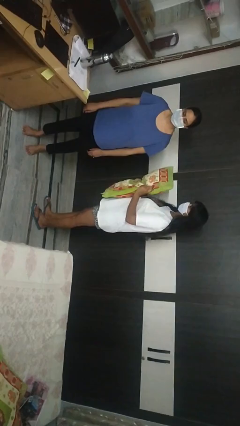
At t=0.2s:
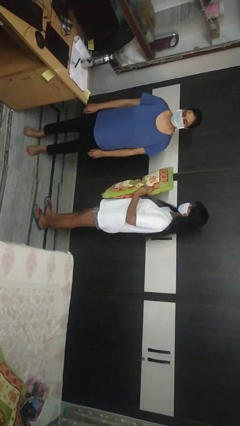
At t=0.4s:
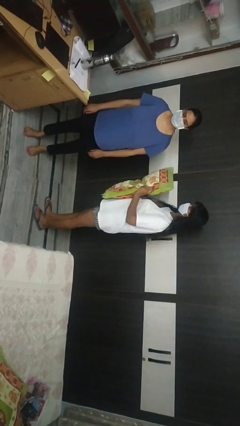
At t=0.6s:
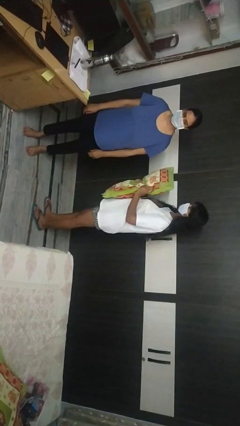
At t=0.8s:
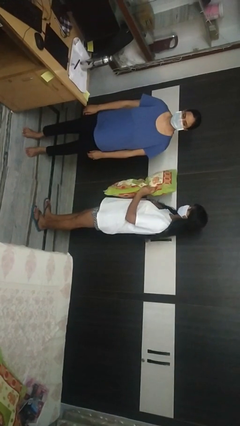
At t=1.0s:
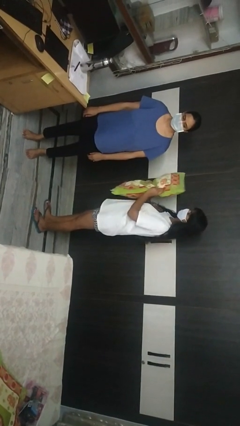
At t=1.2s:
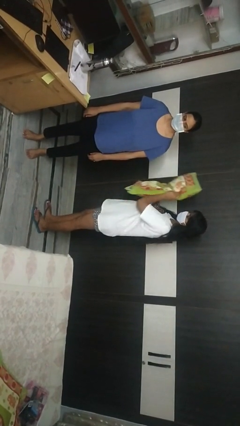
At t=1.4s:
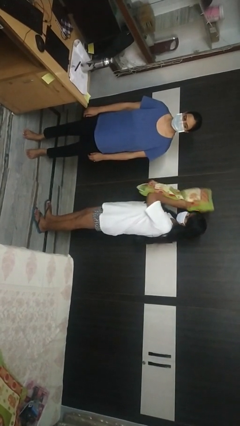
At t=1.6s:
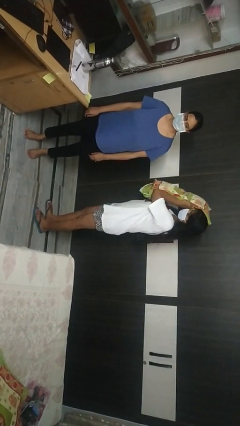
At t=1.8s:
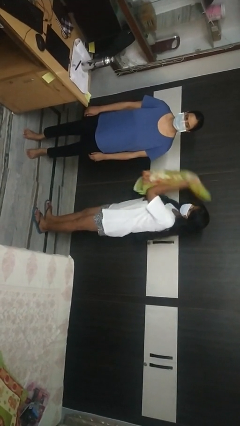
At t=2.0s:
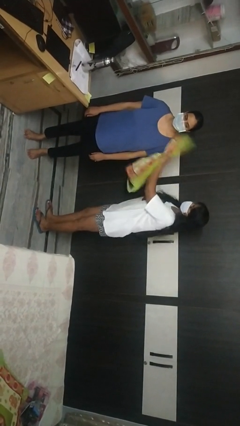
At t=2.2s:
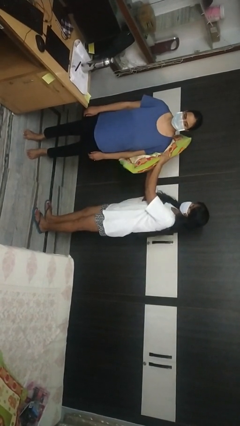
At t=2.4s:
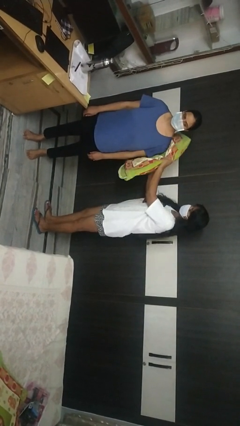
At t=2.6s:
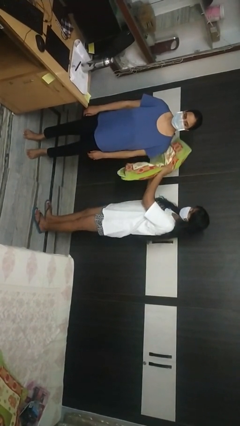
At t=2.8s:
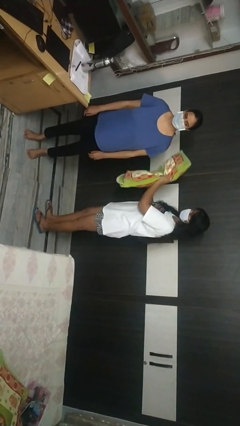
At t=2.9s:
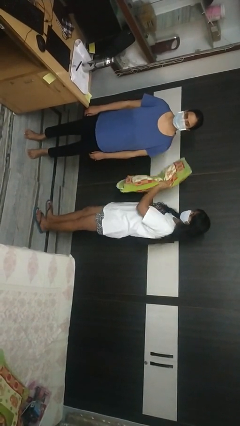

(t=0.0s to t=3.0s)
person hits person with pillow

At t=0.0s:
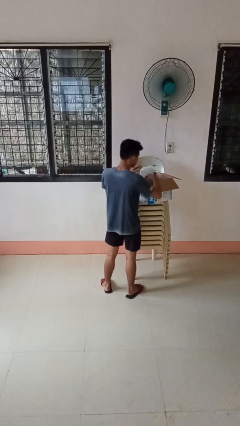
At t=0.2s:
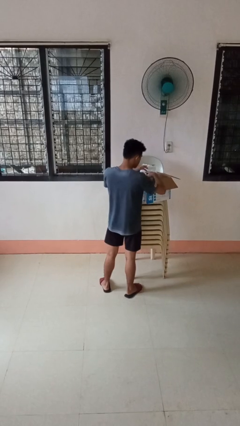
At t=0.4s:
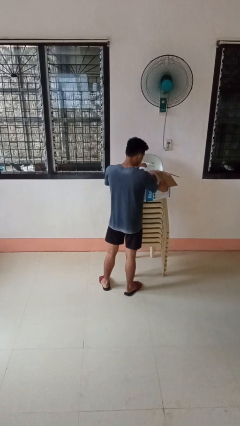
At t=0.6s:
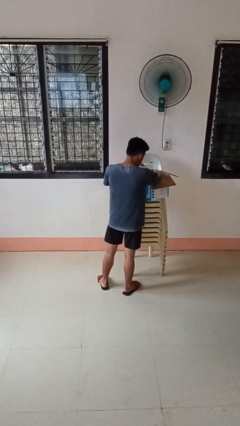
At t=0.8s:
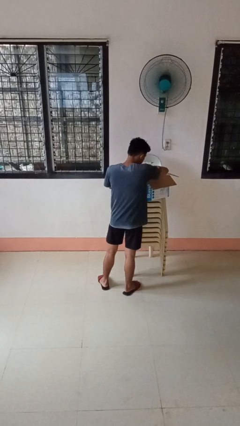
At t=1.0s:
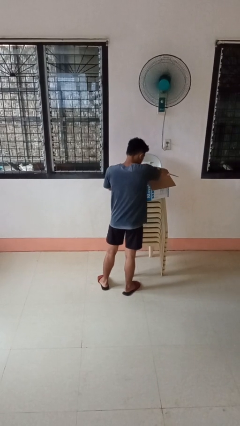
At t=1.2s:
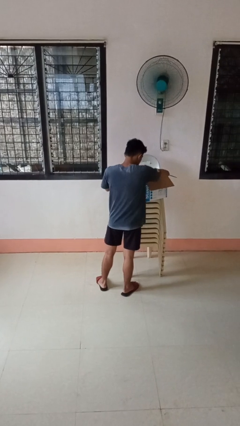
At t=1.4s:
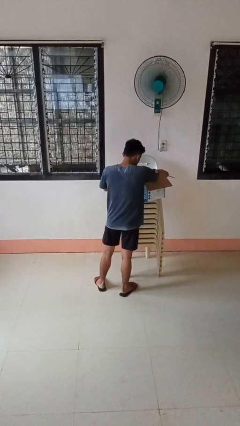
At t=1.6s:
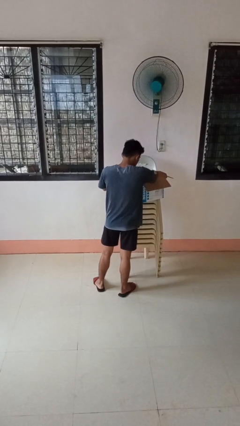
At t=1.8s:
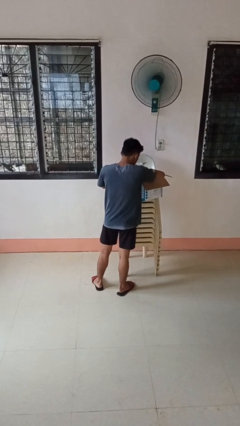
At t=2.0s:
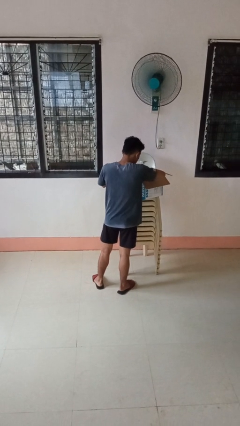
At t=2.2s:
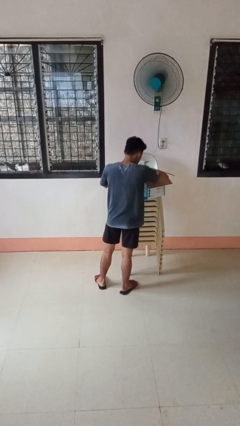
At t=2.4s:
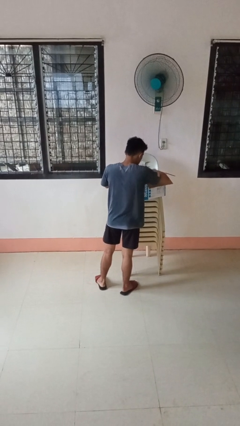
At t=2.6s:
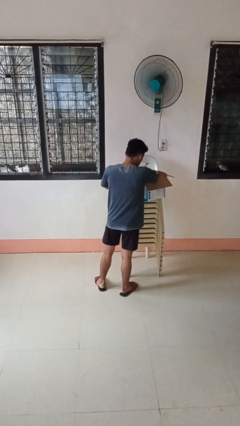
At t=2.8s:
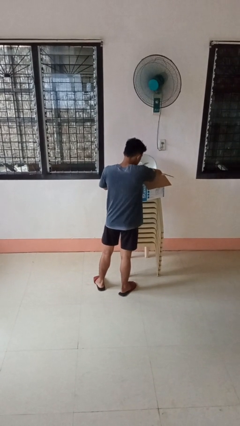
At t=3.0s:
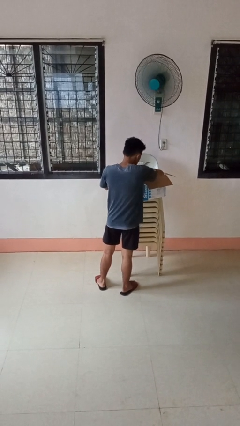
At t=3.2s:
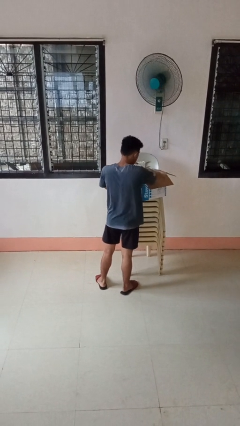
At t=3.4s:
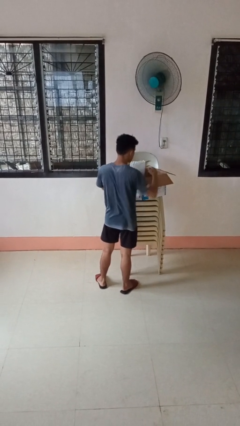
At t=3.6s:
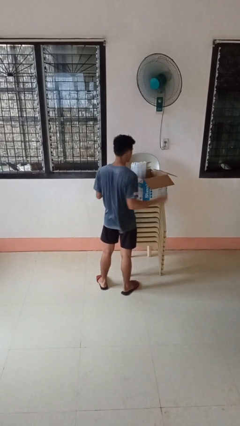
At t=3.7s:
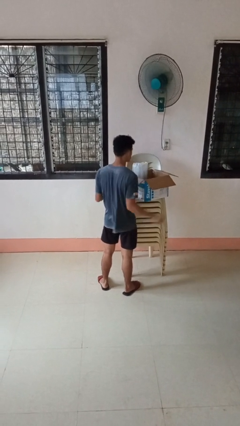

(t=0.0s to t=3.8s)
person searches in box

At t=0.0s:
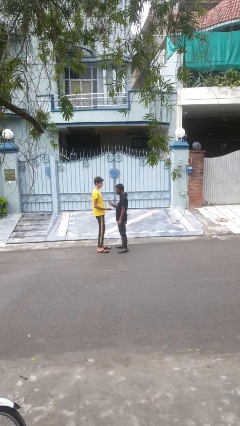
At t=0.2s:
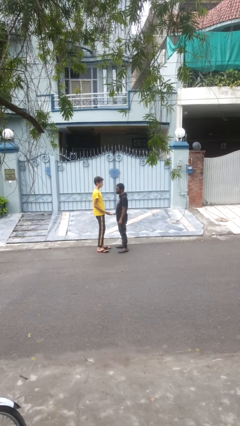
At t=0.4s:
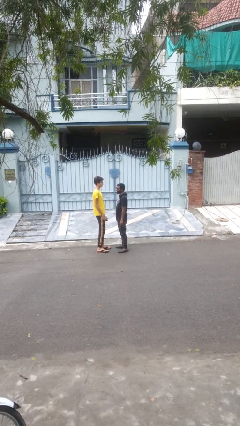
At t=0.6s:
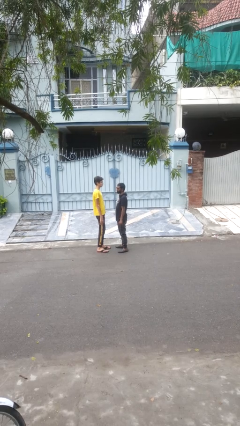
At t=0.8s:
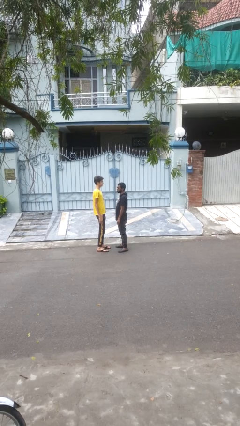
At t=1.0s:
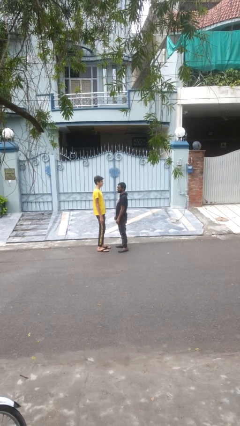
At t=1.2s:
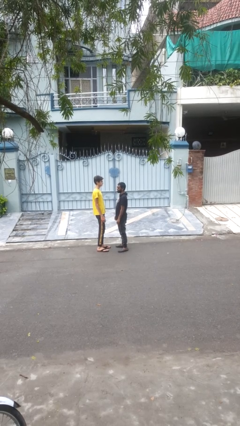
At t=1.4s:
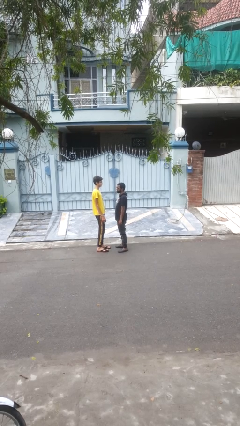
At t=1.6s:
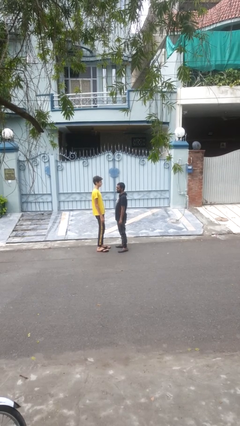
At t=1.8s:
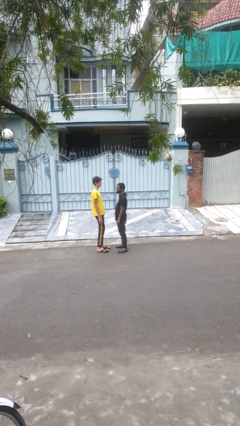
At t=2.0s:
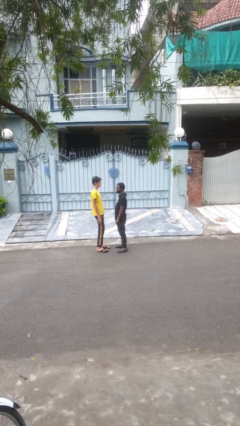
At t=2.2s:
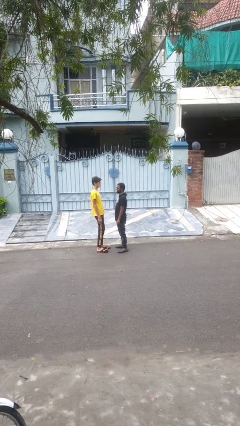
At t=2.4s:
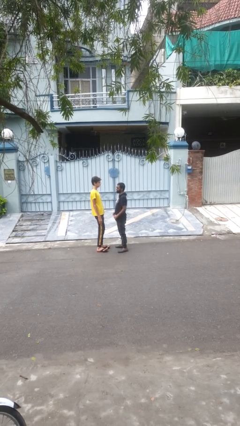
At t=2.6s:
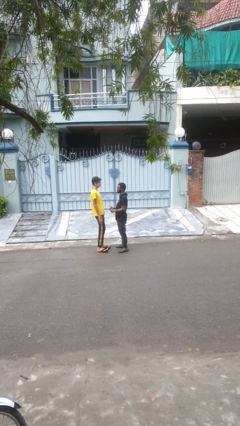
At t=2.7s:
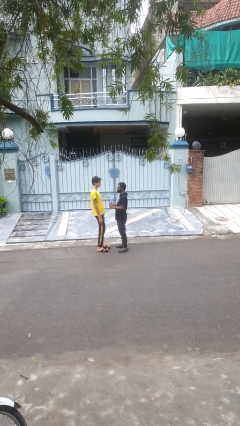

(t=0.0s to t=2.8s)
person highfives hand

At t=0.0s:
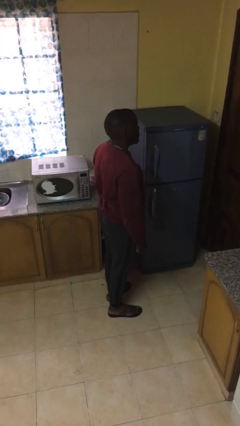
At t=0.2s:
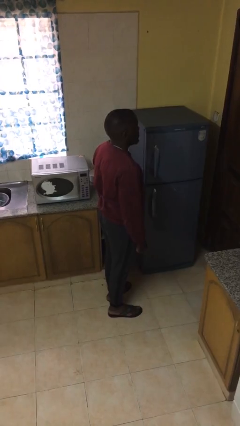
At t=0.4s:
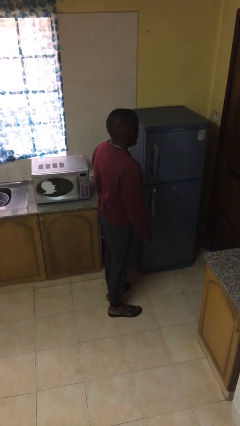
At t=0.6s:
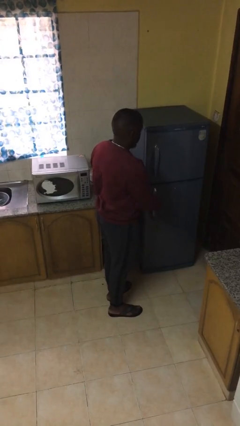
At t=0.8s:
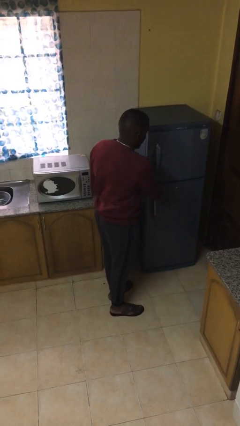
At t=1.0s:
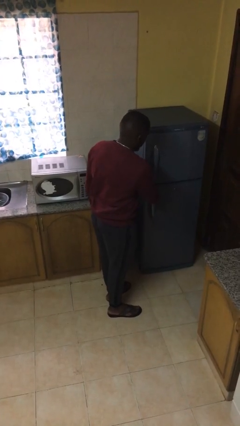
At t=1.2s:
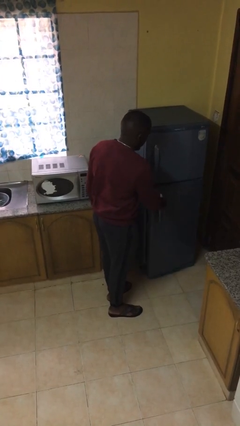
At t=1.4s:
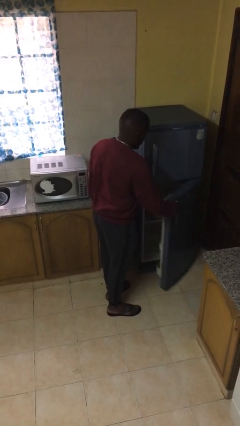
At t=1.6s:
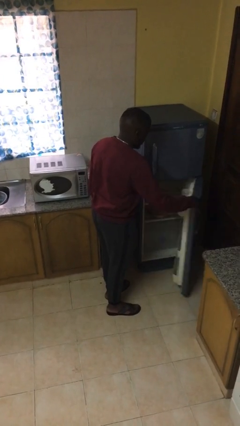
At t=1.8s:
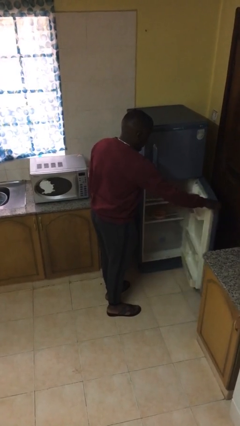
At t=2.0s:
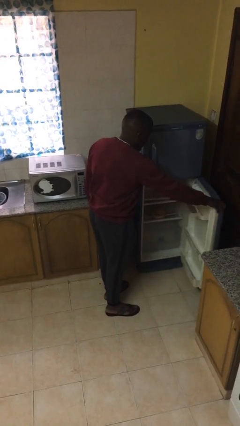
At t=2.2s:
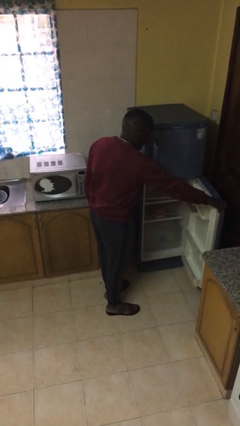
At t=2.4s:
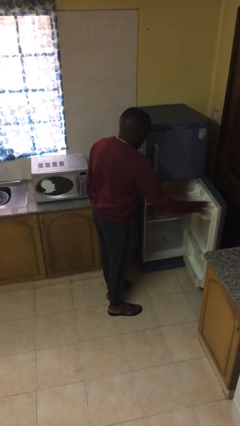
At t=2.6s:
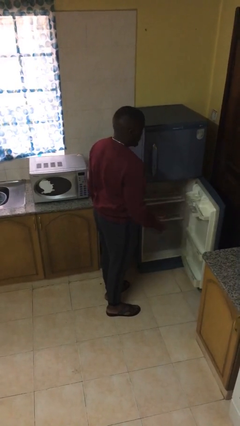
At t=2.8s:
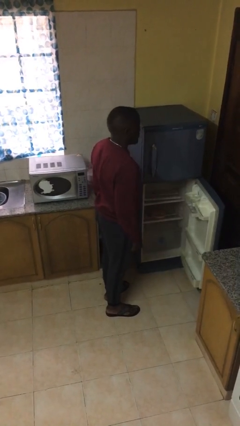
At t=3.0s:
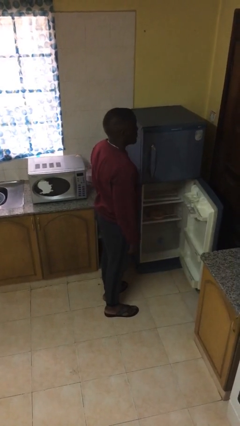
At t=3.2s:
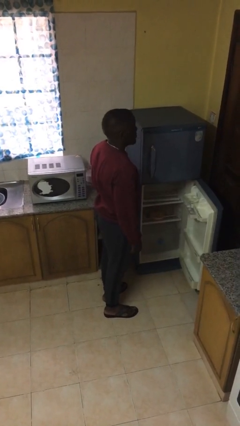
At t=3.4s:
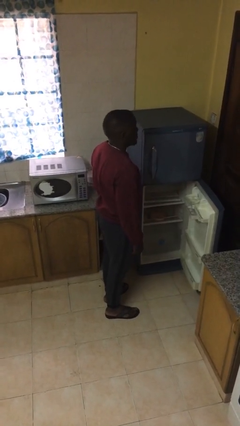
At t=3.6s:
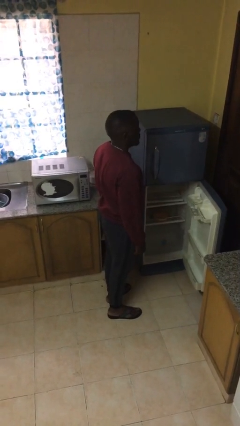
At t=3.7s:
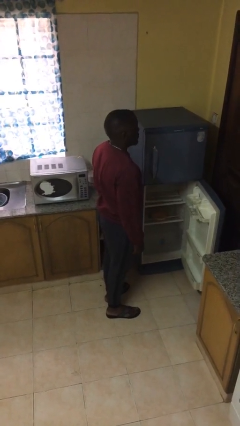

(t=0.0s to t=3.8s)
person opens refrigerator

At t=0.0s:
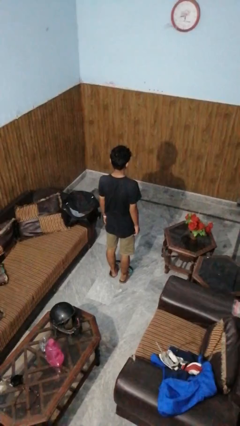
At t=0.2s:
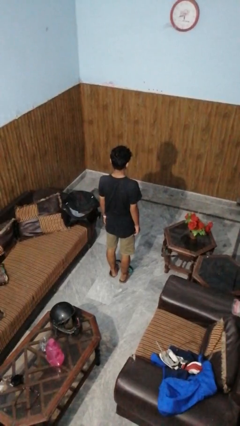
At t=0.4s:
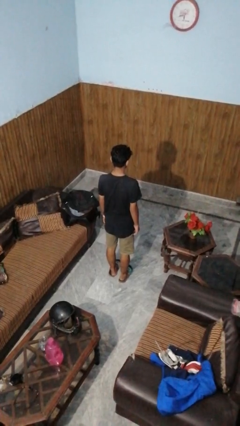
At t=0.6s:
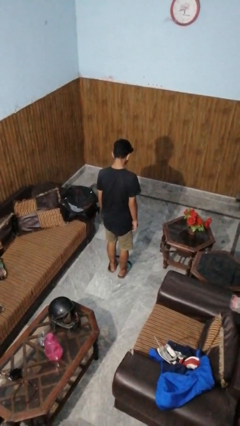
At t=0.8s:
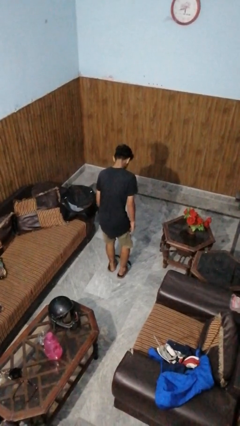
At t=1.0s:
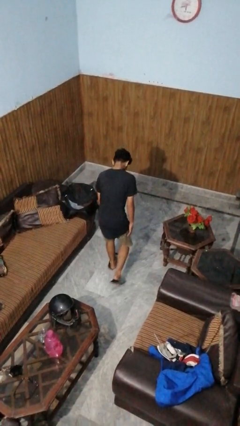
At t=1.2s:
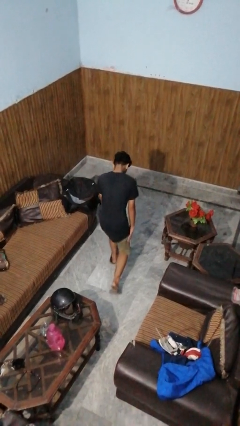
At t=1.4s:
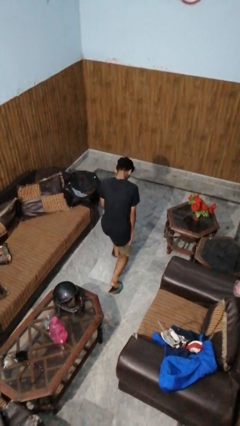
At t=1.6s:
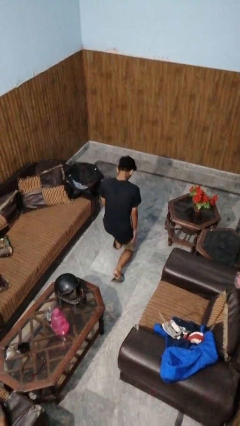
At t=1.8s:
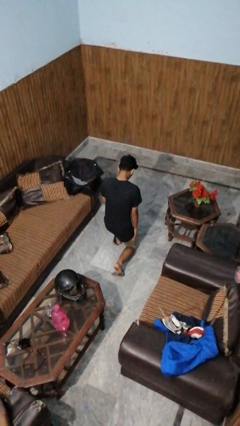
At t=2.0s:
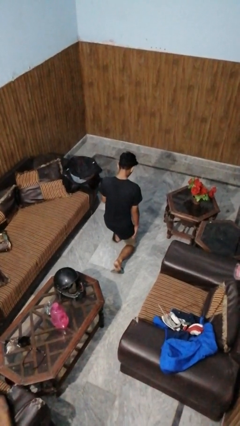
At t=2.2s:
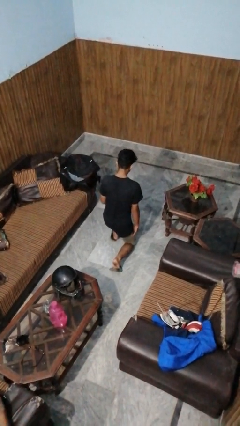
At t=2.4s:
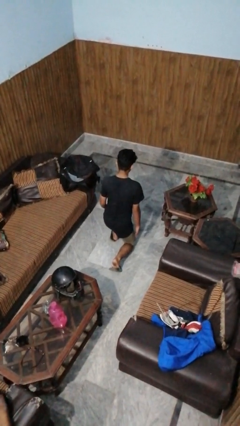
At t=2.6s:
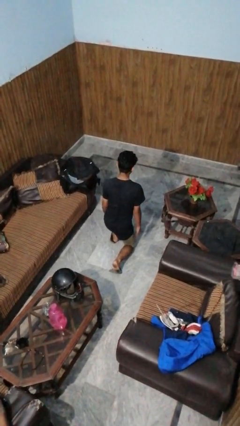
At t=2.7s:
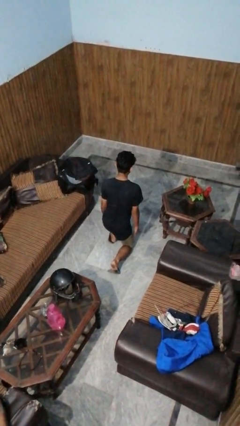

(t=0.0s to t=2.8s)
person kneels

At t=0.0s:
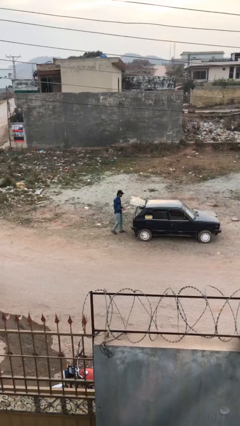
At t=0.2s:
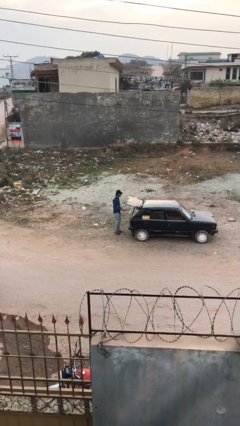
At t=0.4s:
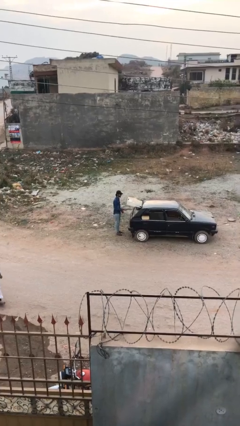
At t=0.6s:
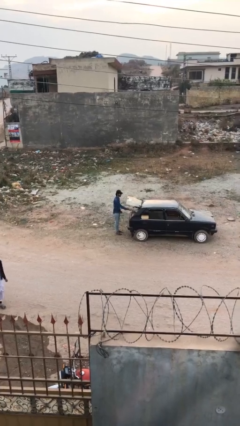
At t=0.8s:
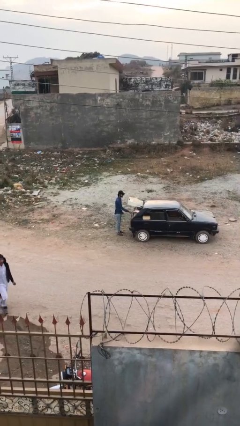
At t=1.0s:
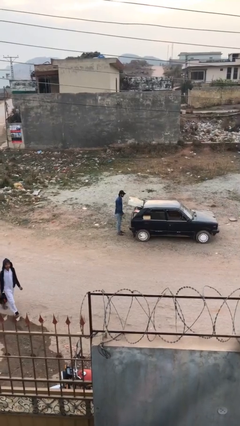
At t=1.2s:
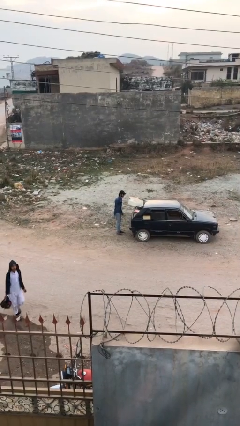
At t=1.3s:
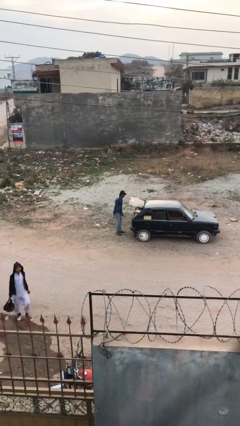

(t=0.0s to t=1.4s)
person loads car
